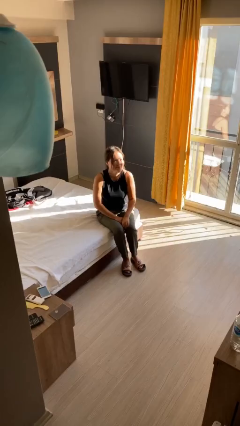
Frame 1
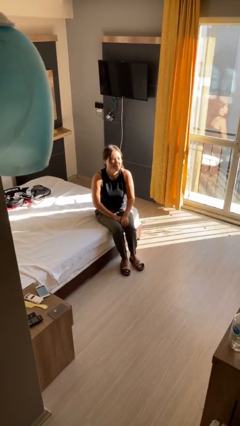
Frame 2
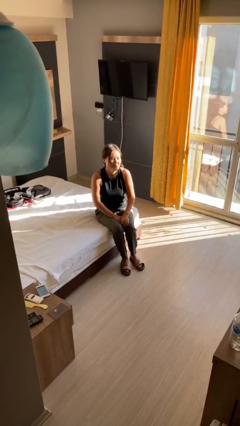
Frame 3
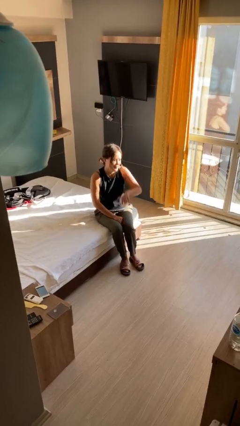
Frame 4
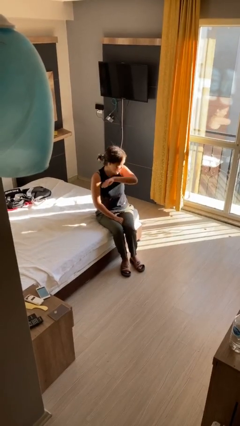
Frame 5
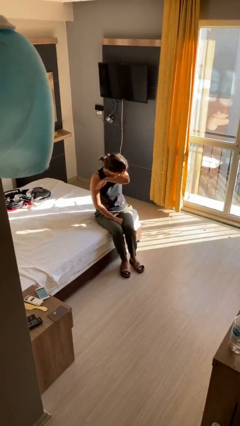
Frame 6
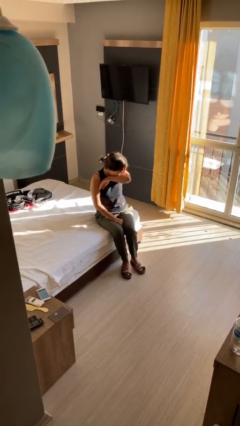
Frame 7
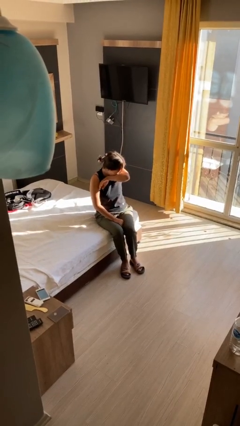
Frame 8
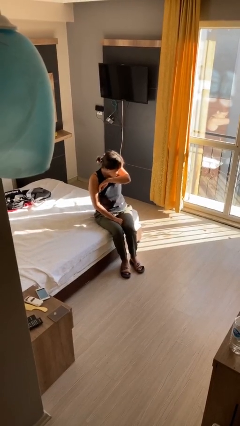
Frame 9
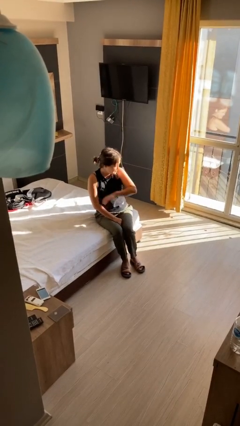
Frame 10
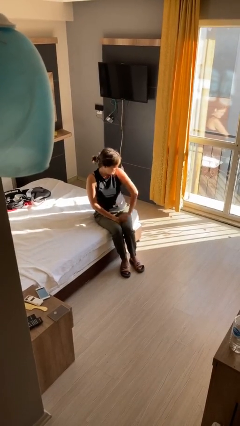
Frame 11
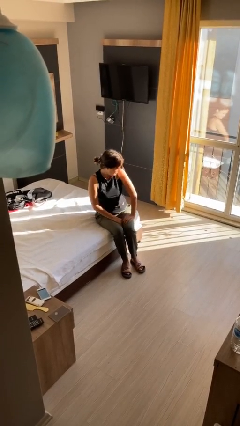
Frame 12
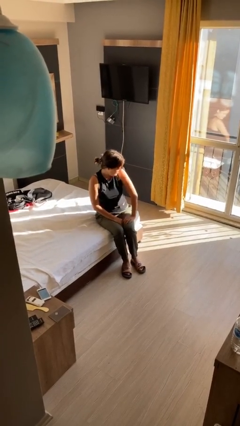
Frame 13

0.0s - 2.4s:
person sneezes into hand

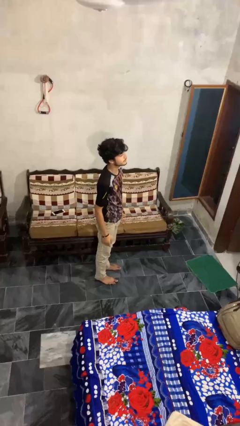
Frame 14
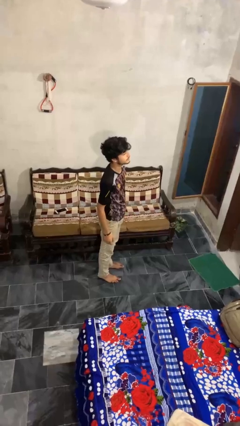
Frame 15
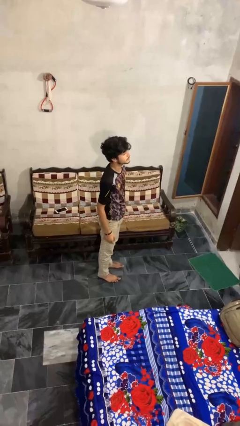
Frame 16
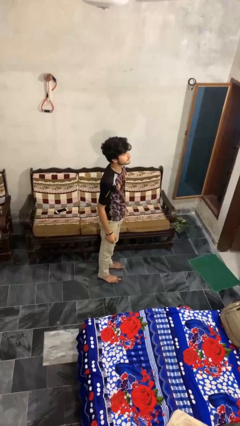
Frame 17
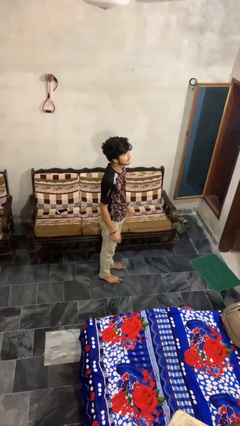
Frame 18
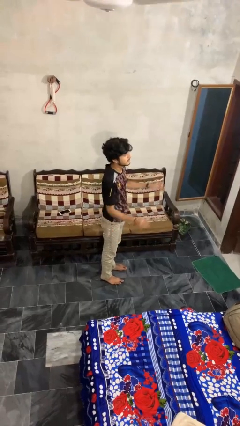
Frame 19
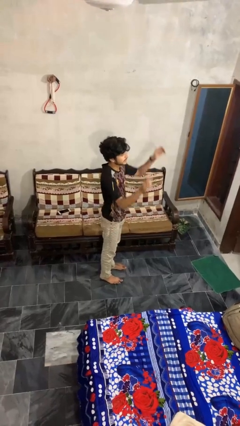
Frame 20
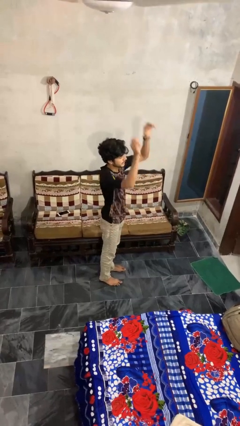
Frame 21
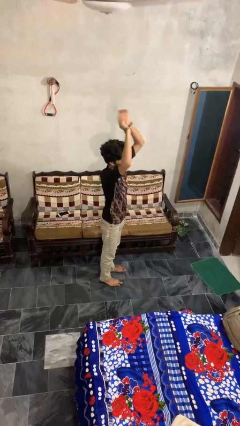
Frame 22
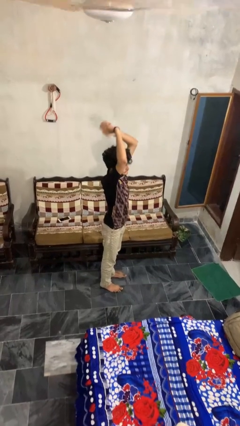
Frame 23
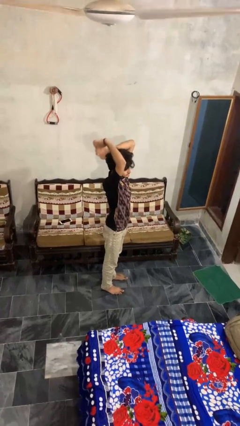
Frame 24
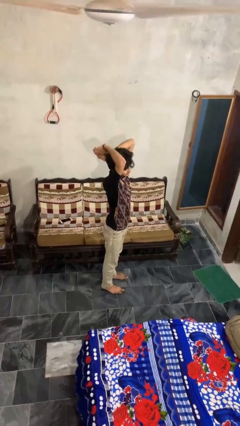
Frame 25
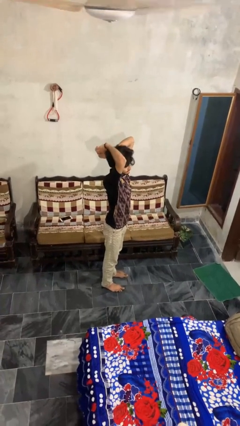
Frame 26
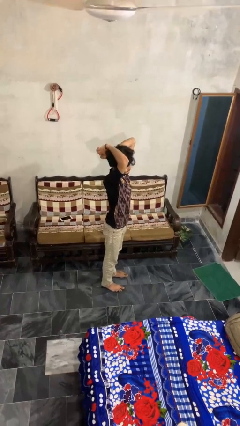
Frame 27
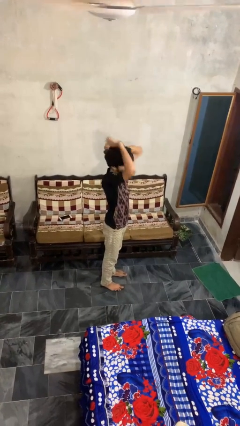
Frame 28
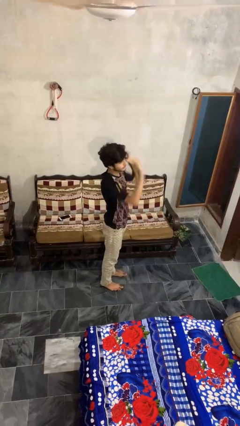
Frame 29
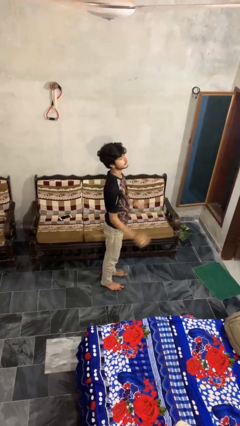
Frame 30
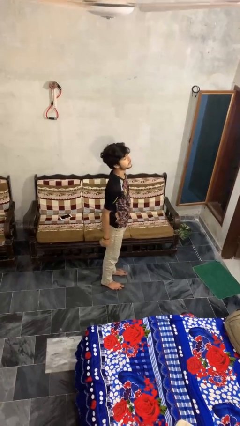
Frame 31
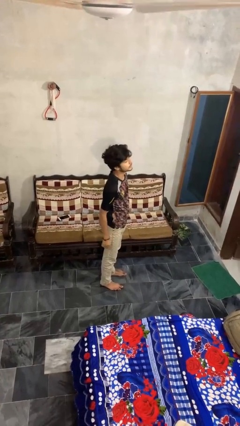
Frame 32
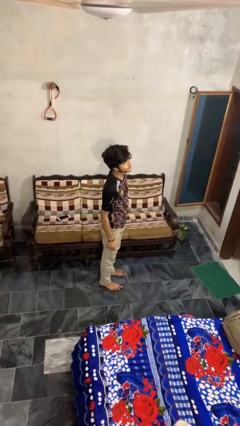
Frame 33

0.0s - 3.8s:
person stretches arms over head

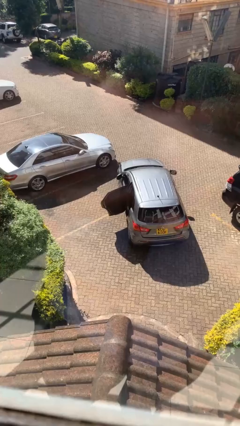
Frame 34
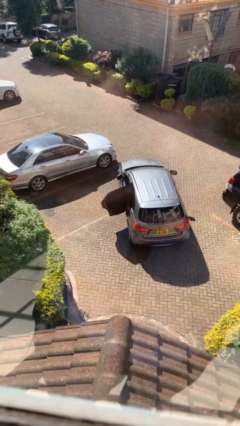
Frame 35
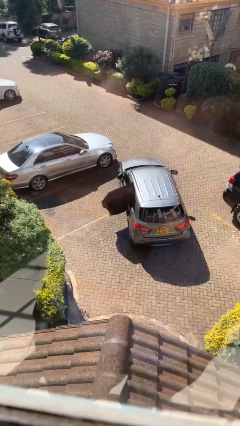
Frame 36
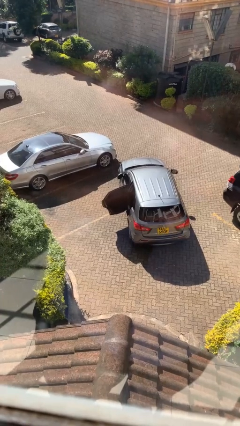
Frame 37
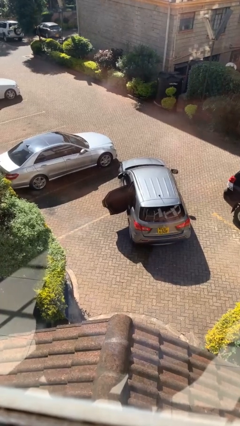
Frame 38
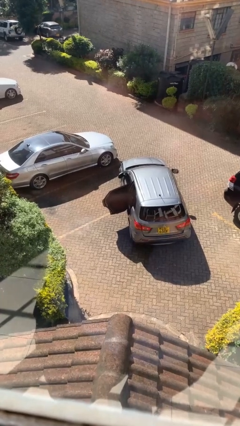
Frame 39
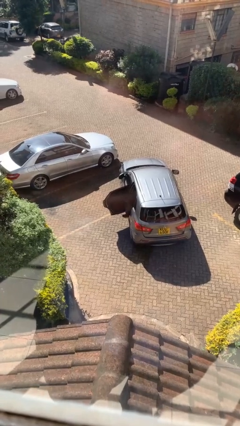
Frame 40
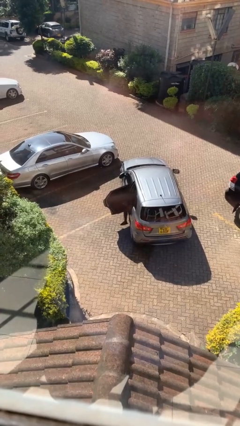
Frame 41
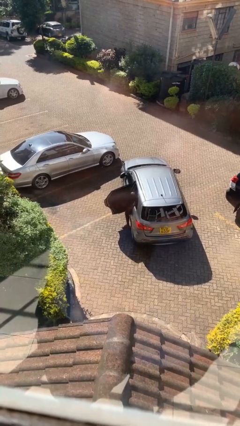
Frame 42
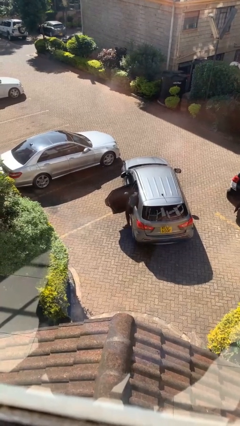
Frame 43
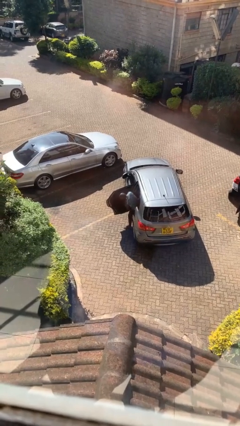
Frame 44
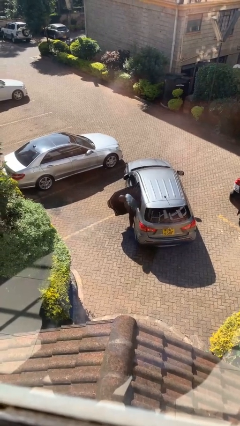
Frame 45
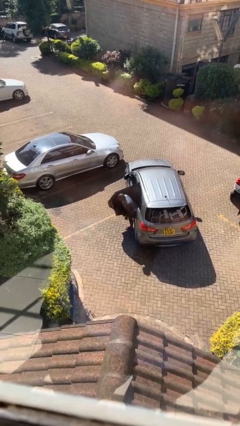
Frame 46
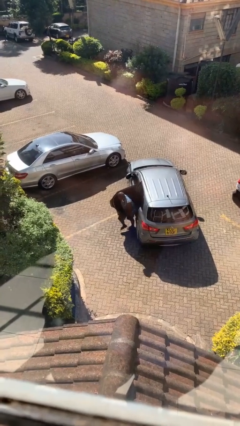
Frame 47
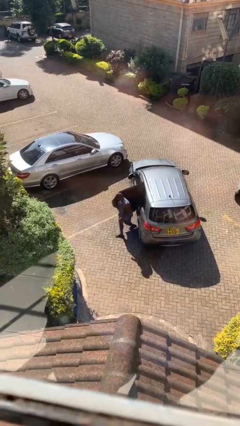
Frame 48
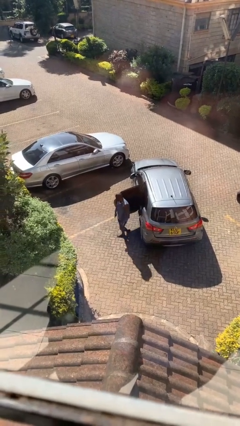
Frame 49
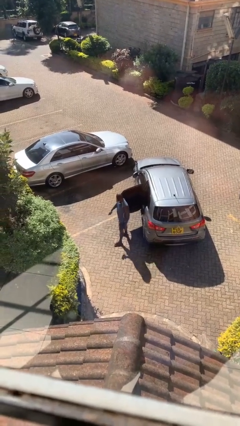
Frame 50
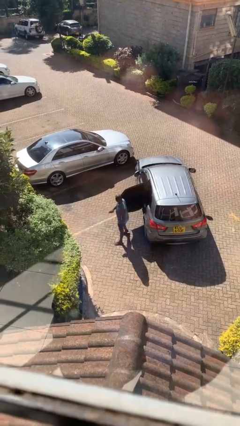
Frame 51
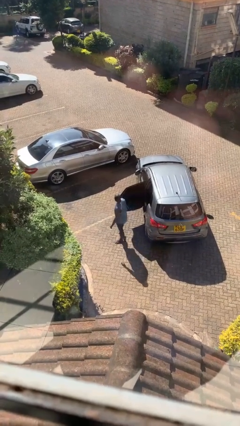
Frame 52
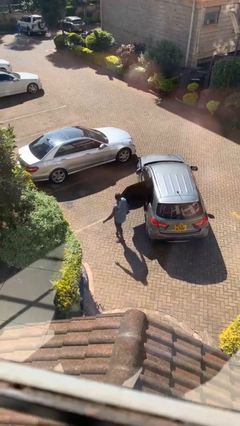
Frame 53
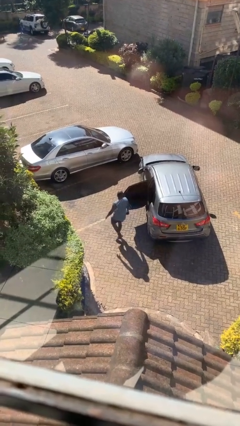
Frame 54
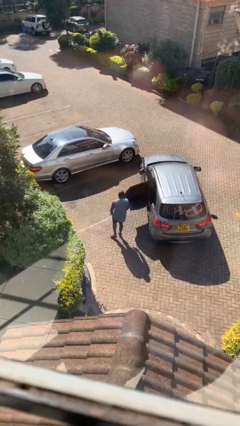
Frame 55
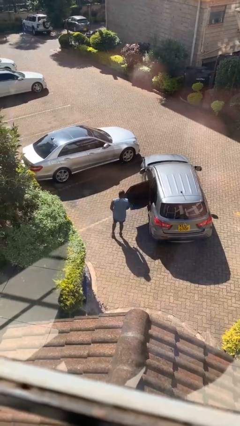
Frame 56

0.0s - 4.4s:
person exits car

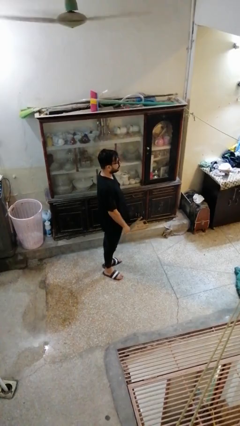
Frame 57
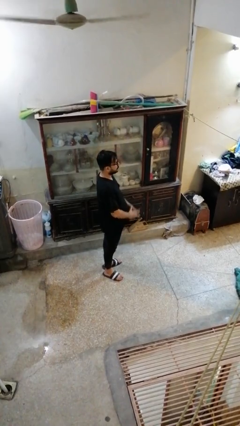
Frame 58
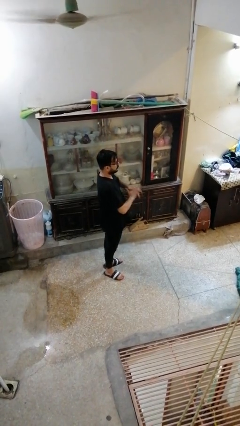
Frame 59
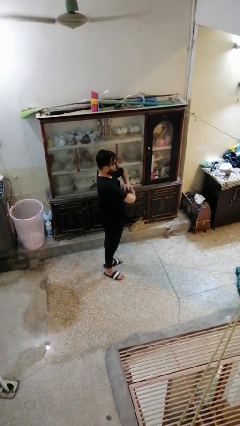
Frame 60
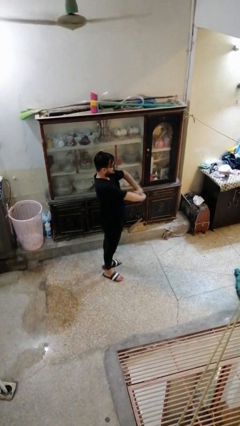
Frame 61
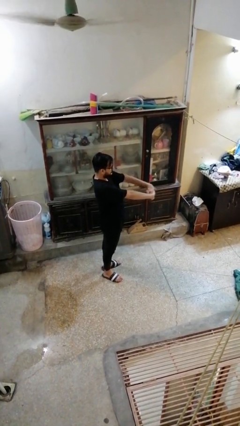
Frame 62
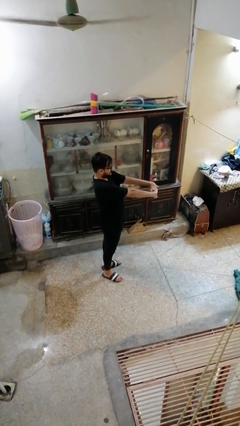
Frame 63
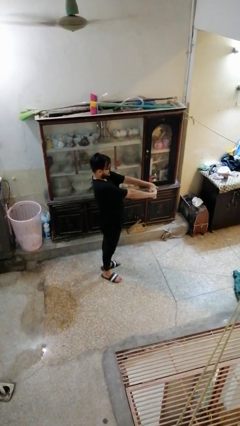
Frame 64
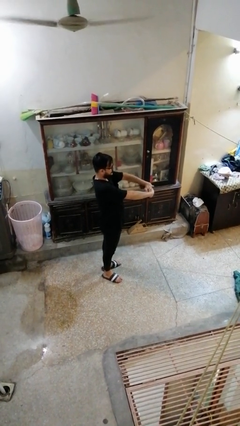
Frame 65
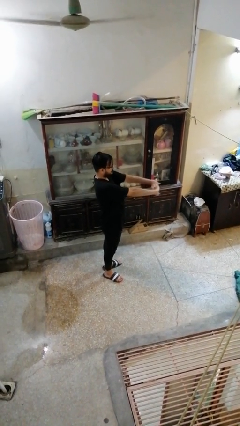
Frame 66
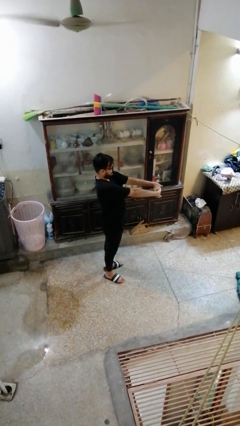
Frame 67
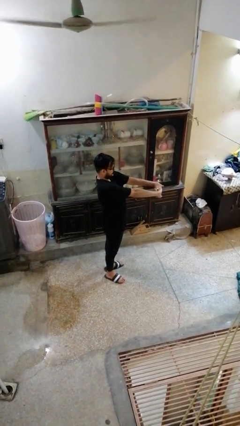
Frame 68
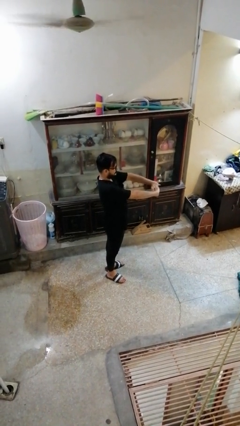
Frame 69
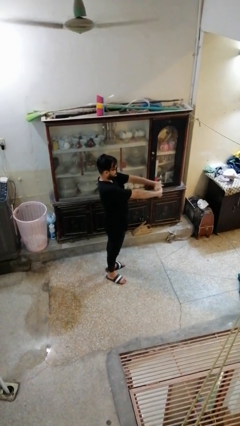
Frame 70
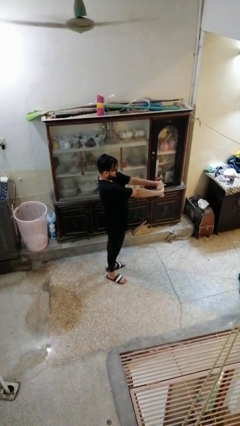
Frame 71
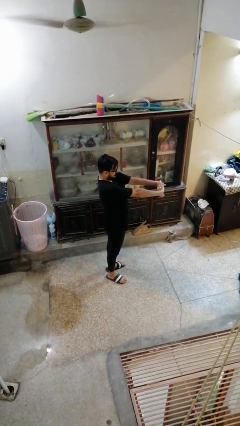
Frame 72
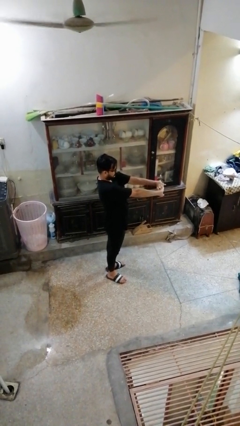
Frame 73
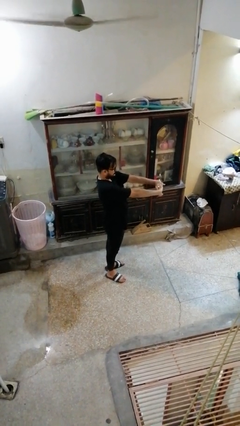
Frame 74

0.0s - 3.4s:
person cracks knuckles

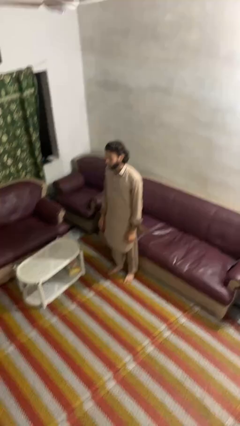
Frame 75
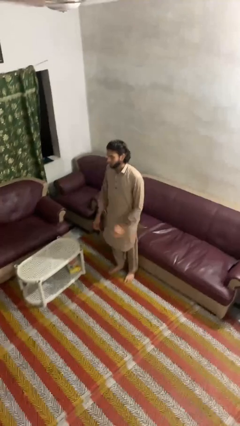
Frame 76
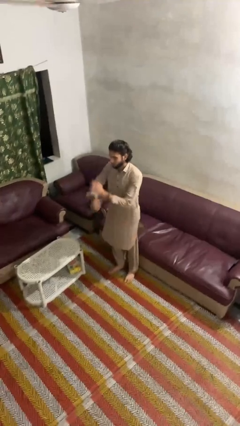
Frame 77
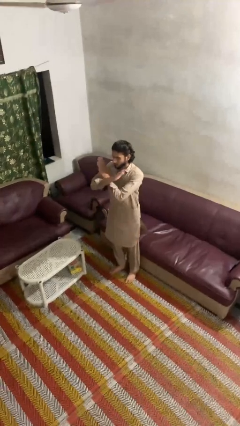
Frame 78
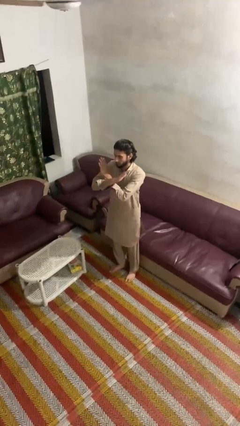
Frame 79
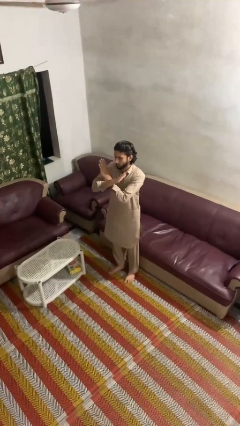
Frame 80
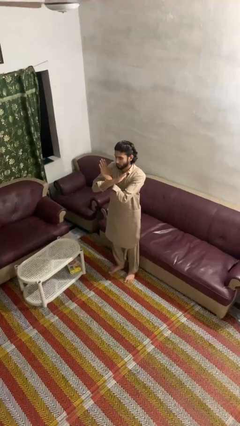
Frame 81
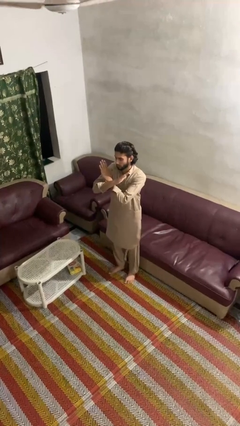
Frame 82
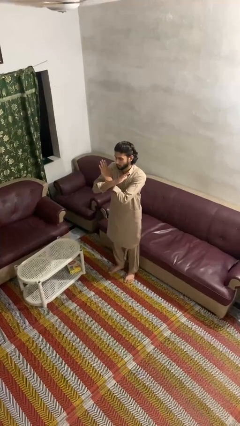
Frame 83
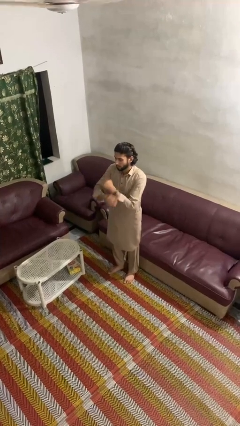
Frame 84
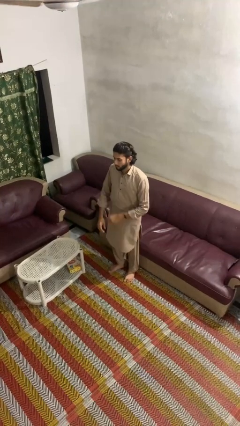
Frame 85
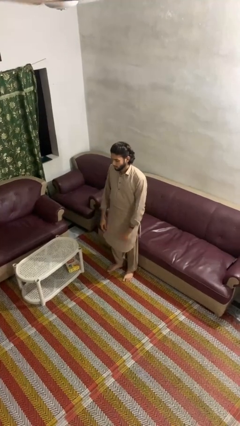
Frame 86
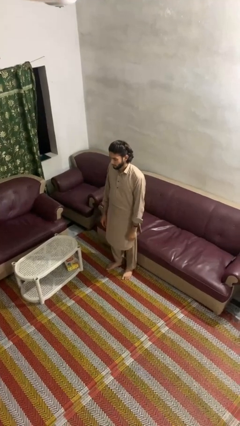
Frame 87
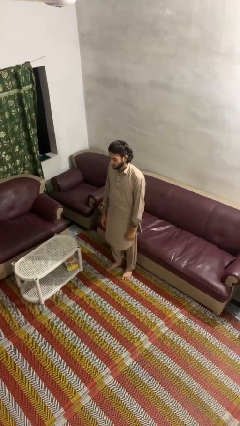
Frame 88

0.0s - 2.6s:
person gestures arms x

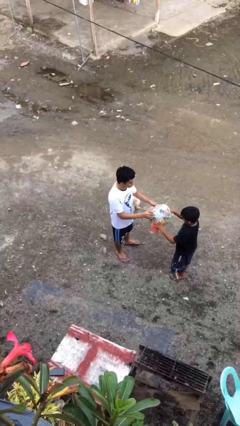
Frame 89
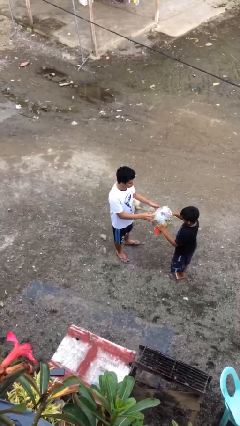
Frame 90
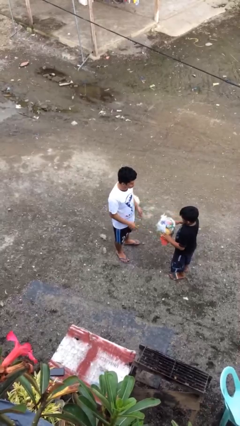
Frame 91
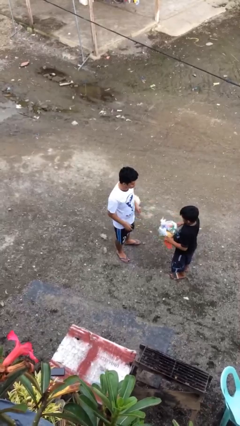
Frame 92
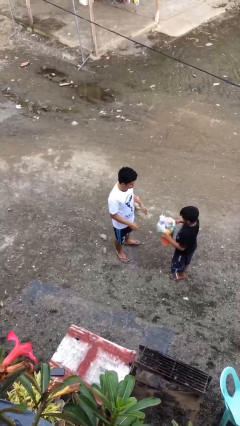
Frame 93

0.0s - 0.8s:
person transfers object to person
